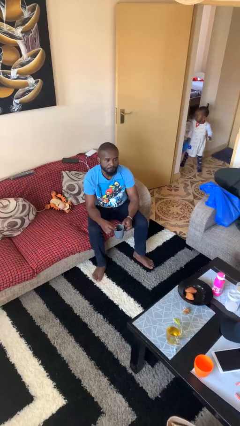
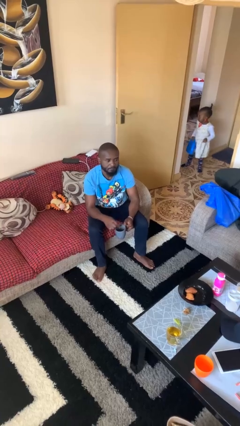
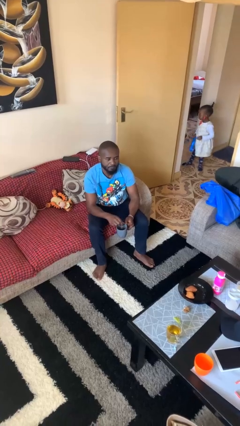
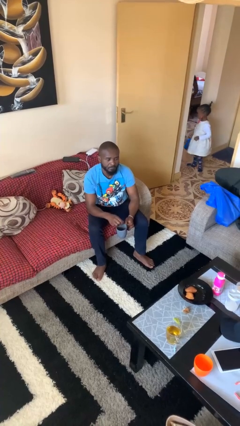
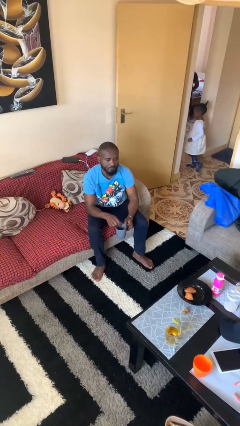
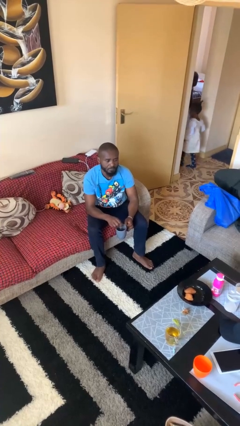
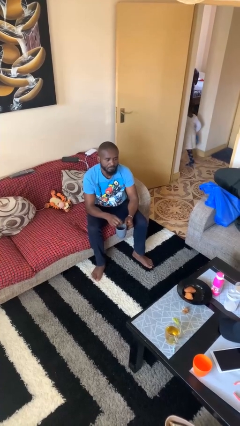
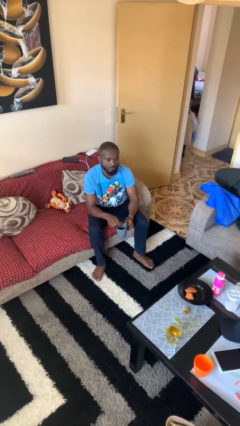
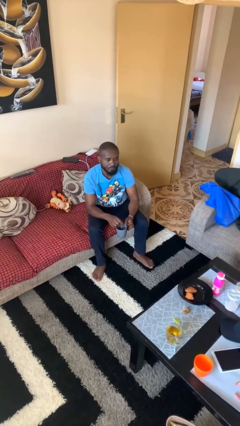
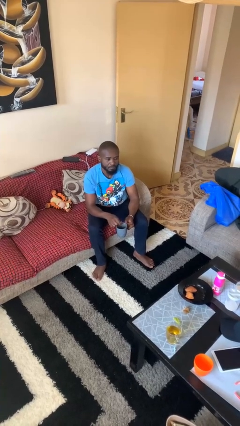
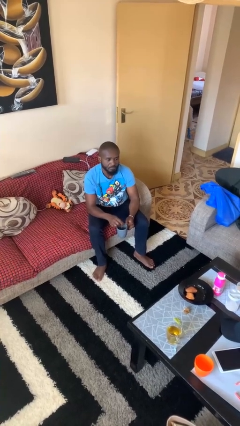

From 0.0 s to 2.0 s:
person stirs mug

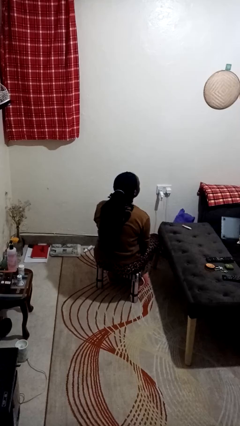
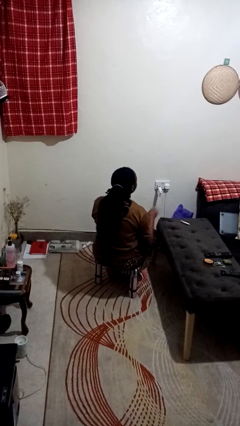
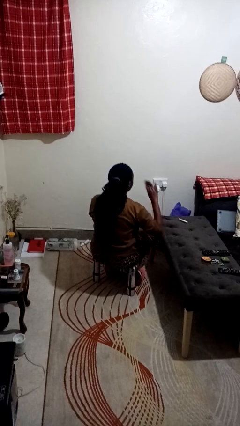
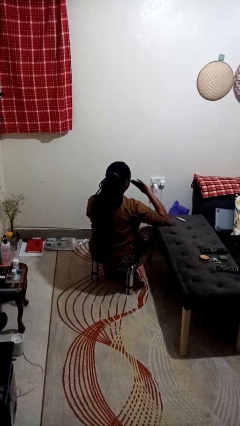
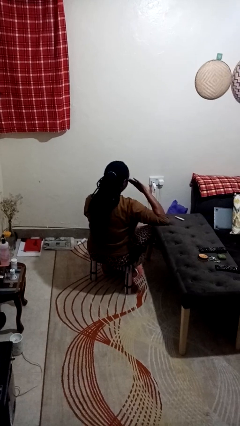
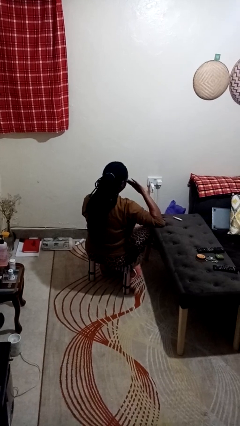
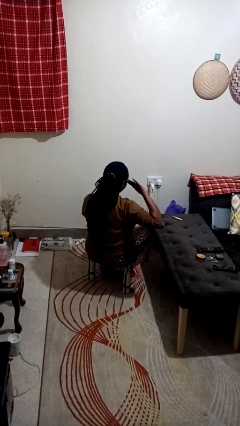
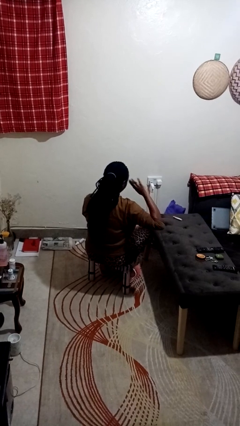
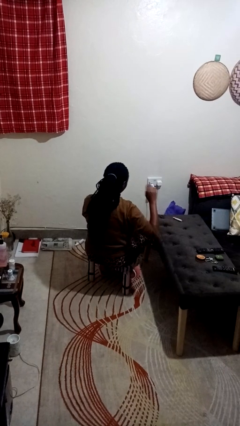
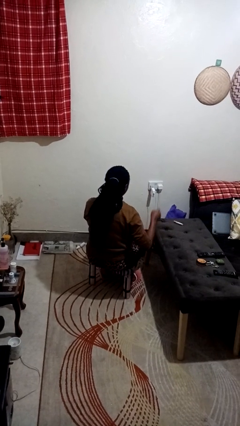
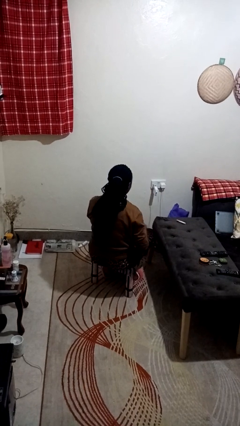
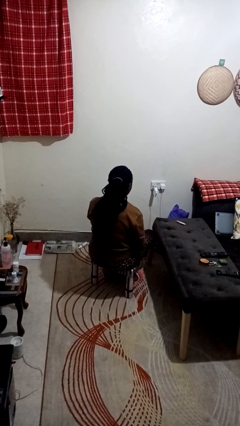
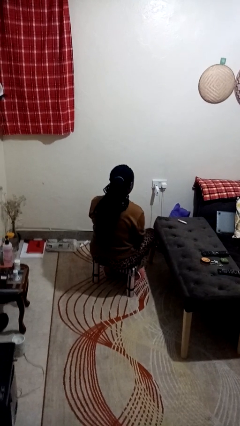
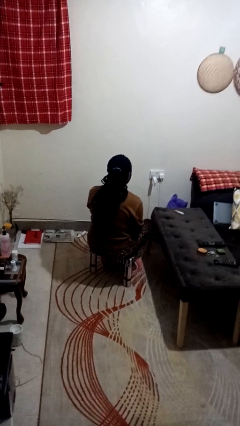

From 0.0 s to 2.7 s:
person salutes

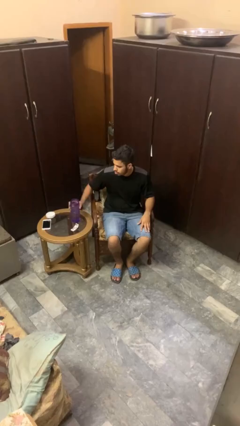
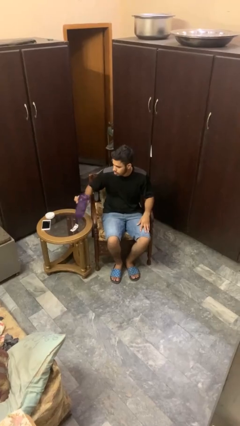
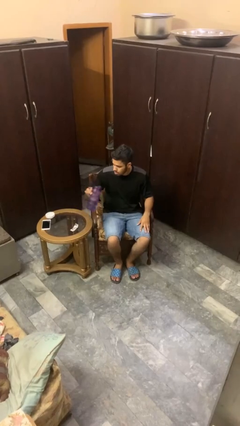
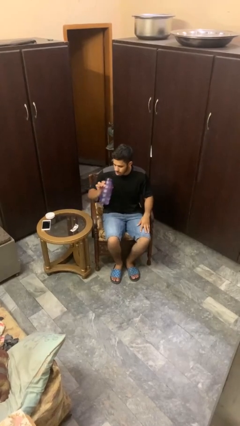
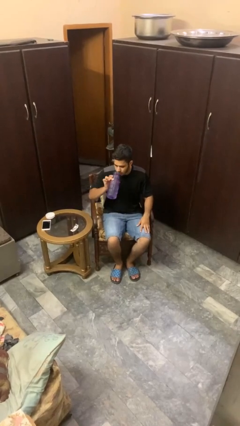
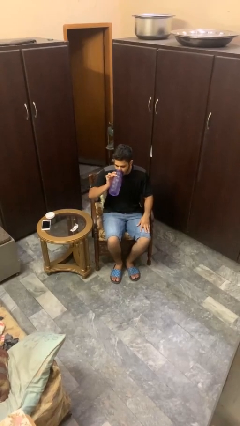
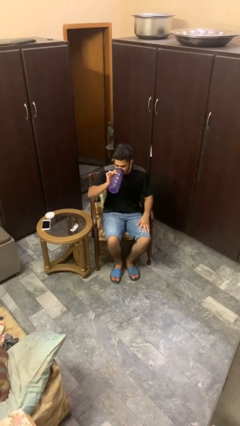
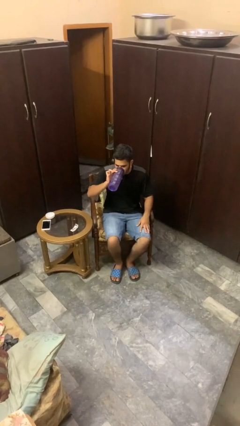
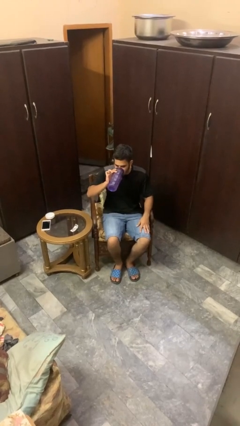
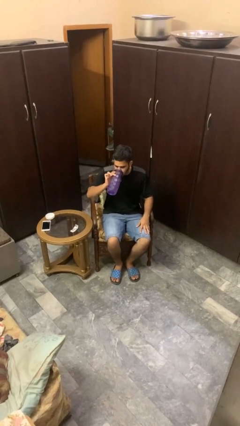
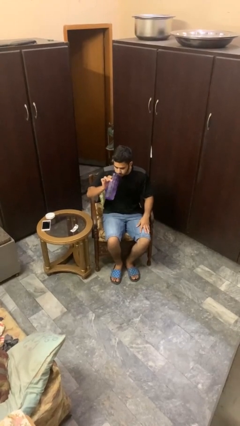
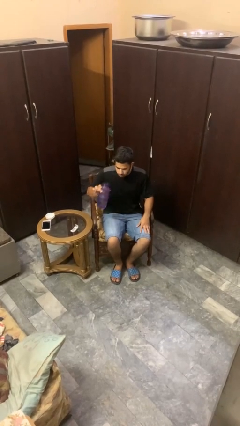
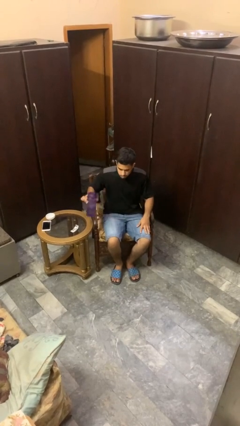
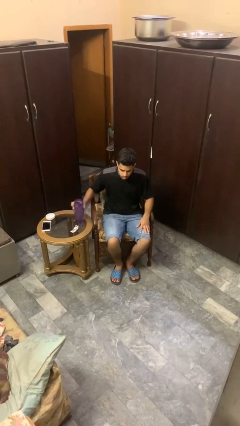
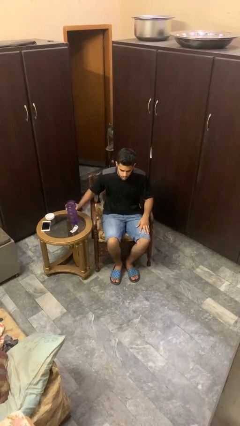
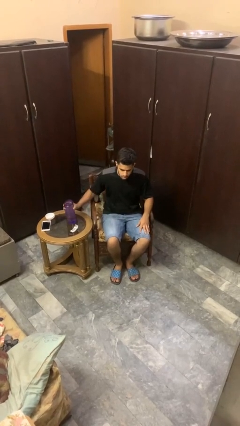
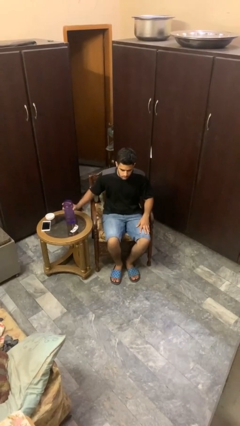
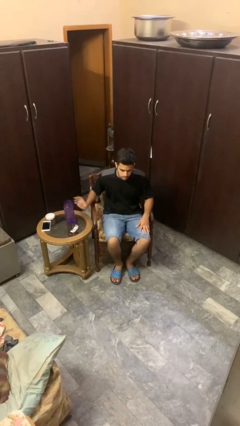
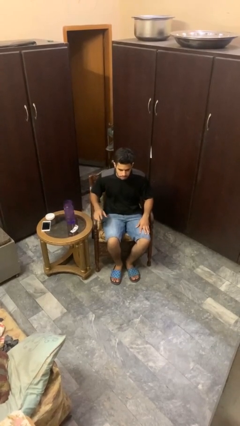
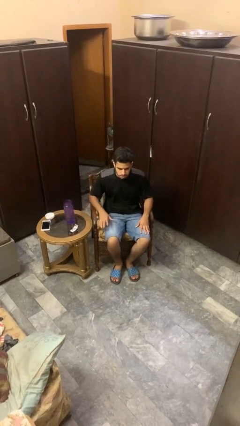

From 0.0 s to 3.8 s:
person drinks from cup

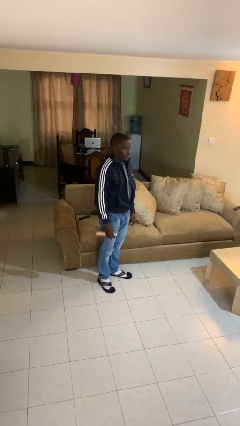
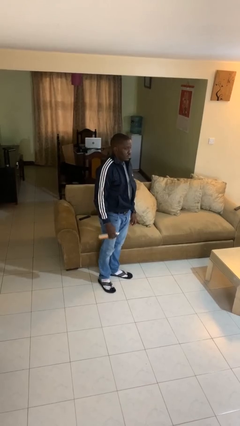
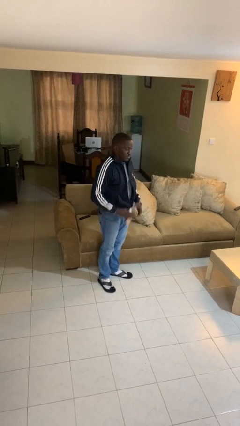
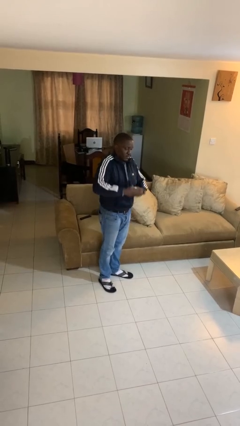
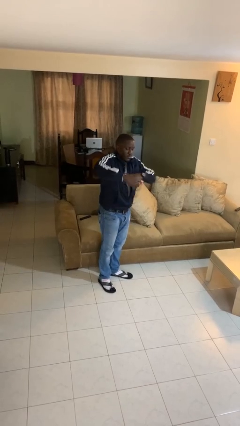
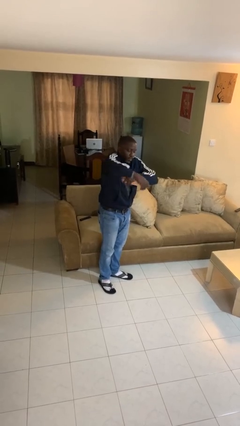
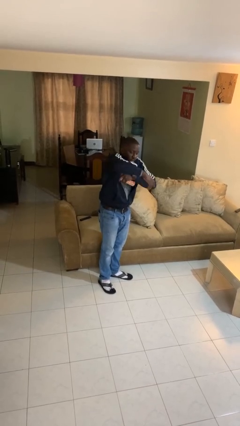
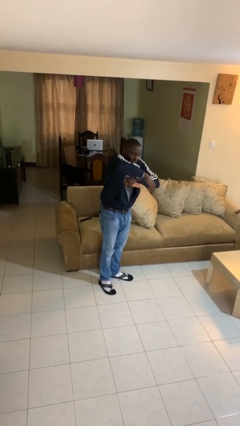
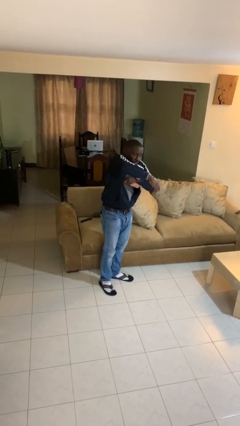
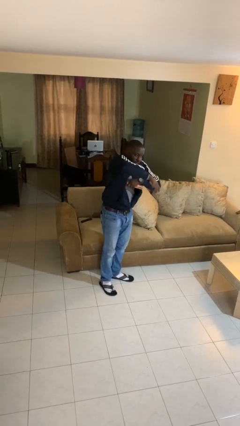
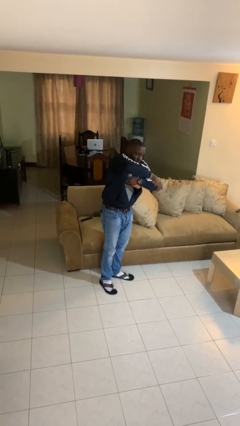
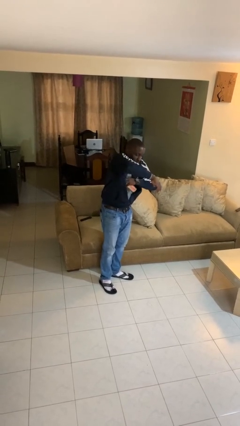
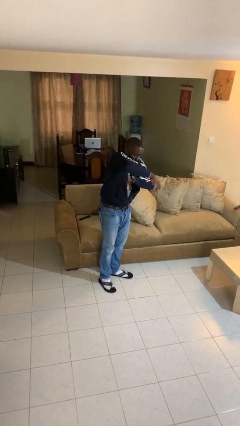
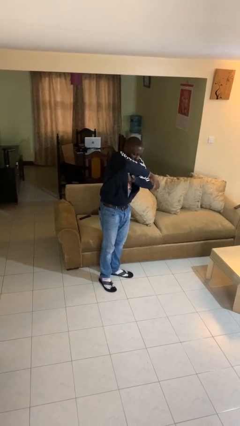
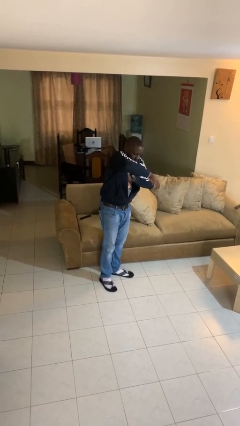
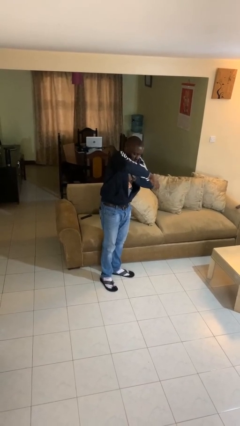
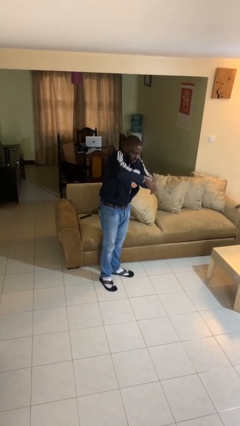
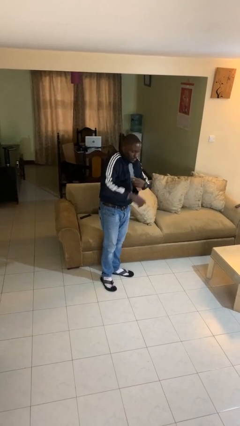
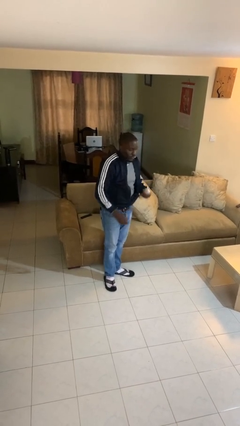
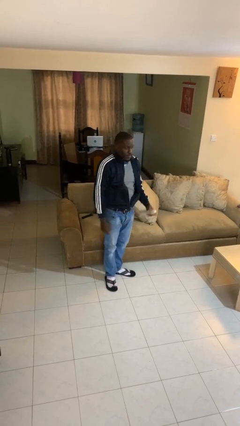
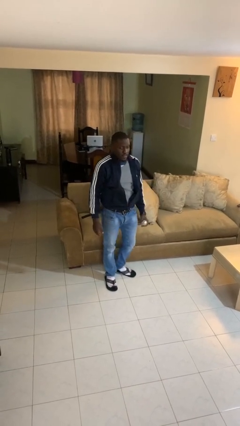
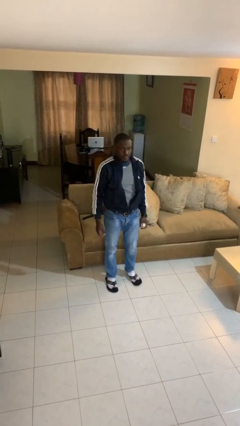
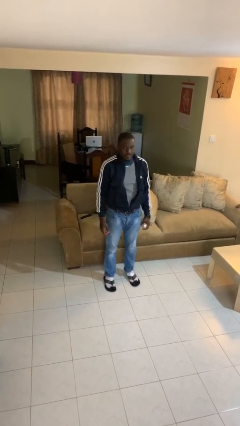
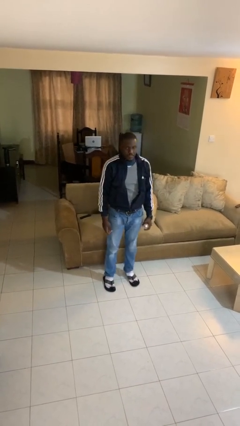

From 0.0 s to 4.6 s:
person applies deodorant

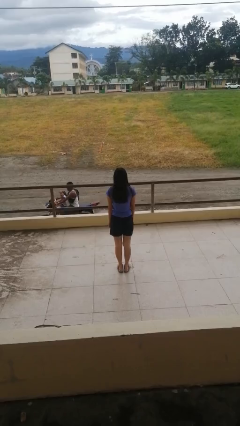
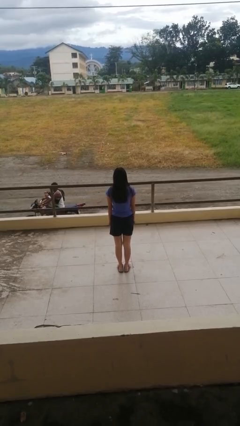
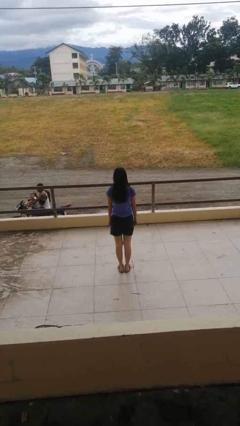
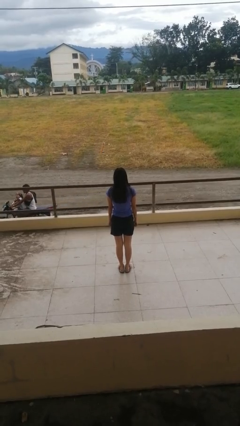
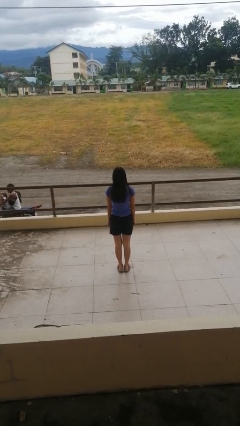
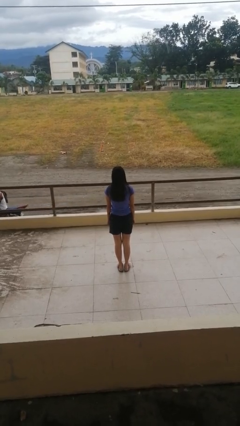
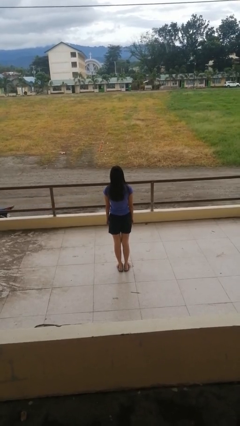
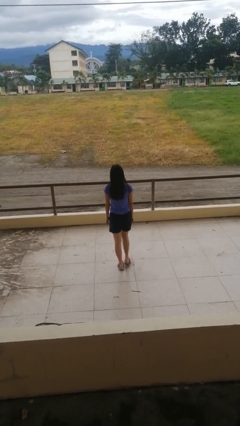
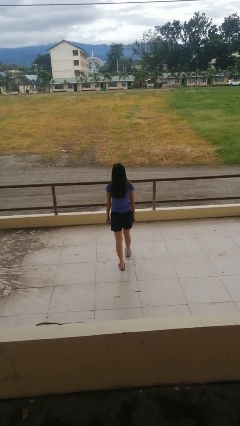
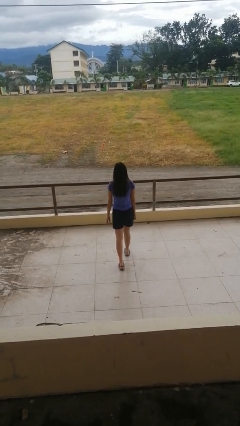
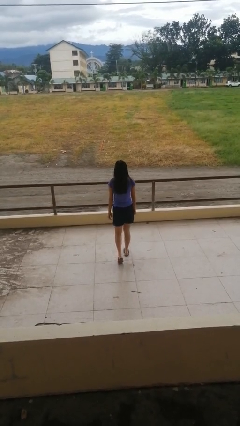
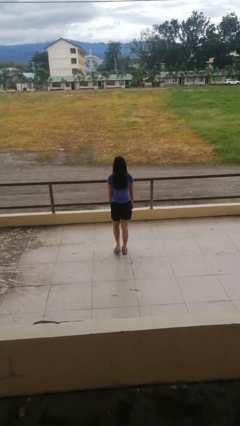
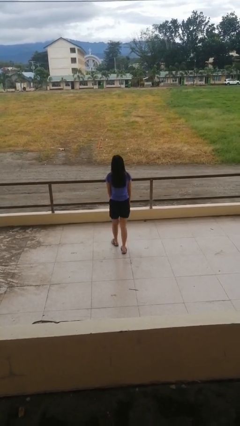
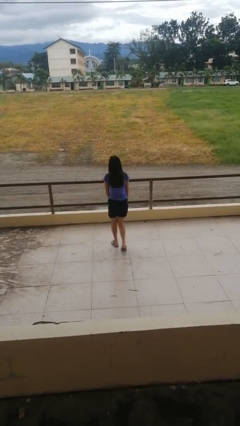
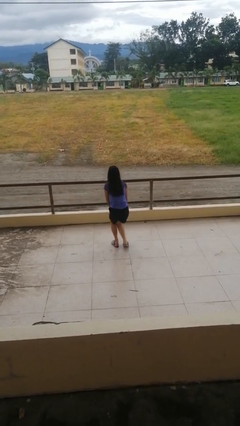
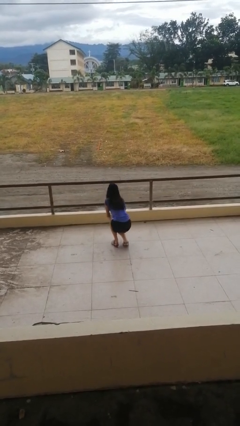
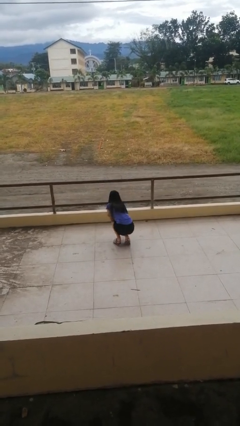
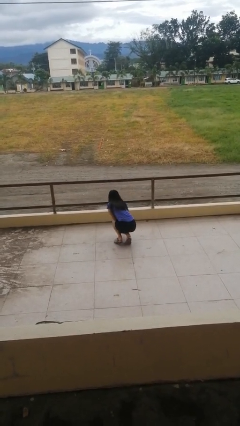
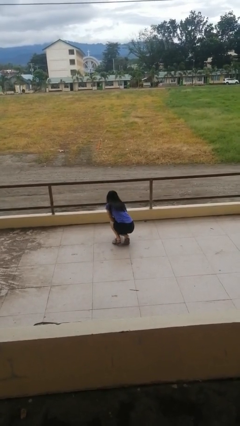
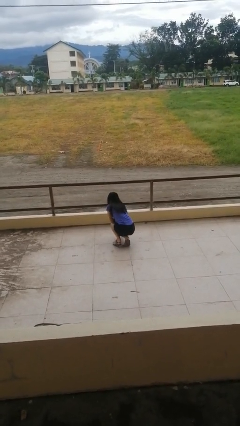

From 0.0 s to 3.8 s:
person trips on object on floor

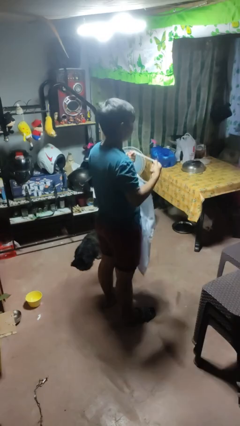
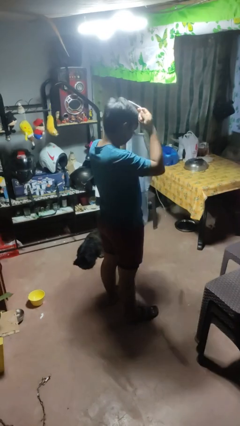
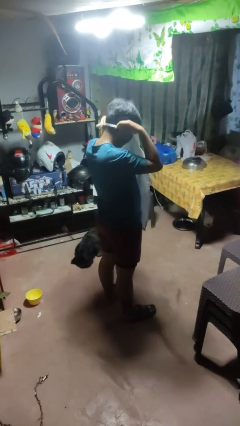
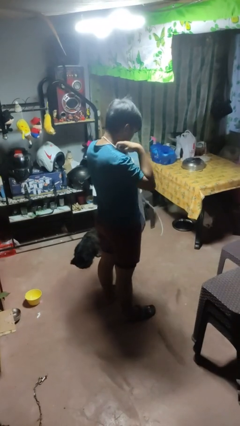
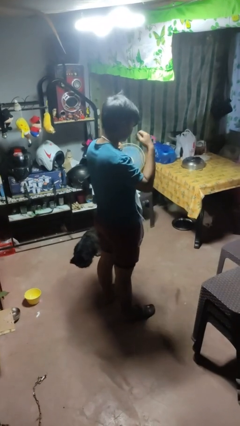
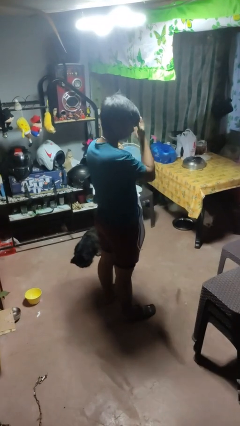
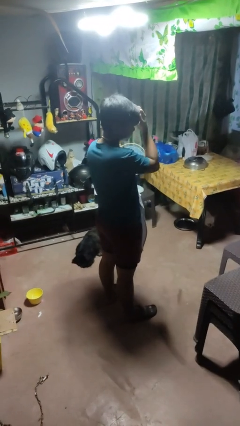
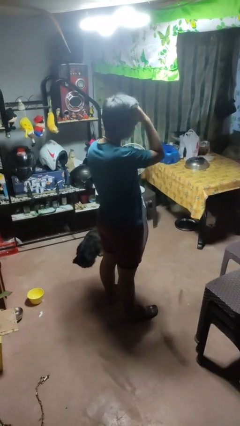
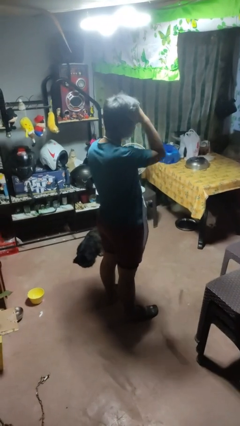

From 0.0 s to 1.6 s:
person puts on apron
